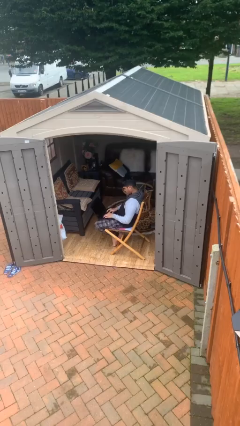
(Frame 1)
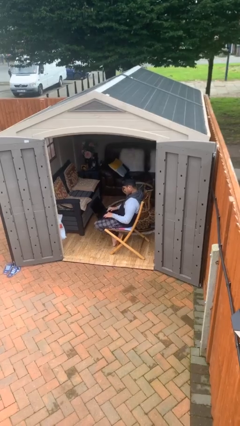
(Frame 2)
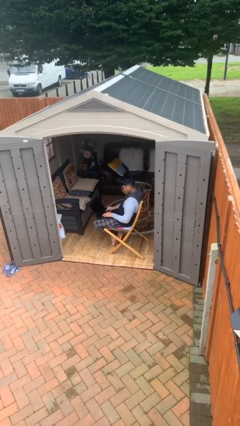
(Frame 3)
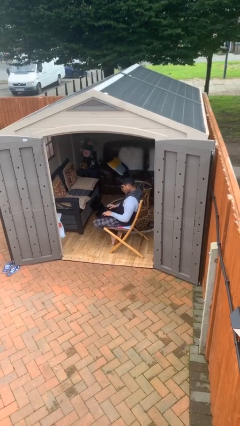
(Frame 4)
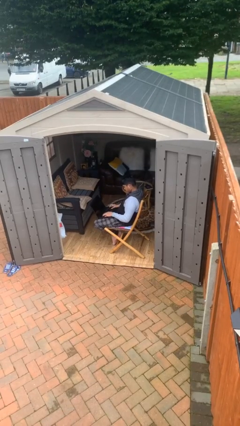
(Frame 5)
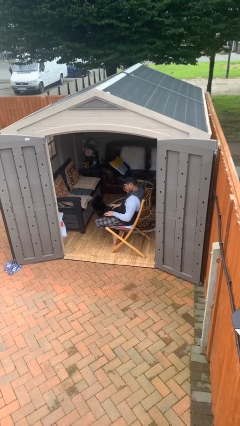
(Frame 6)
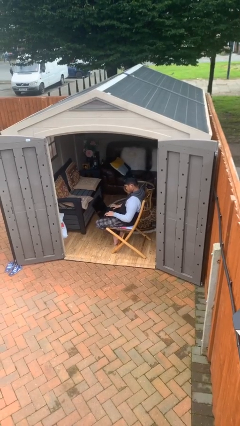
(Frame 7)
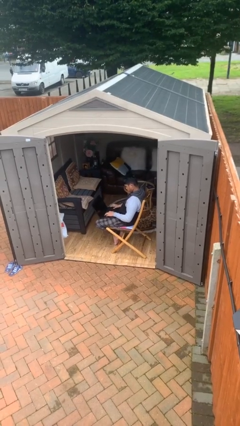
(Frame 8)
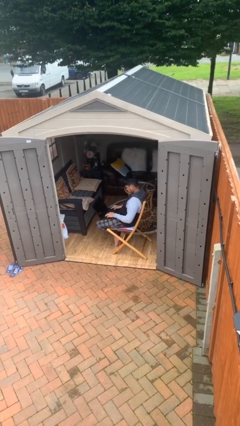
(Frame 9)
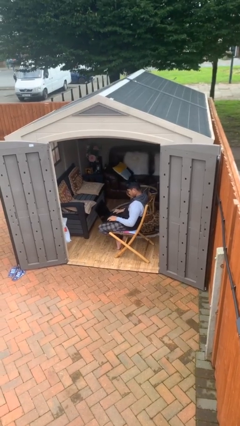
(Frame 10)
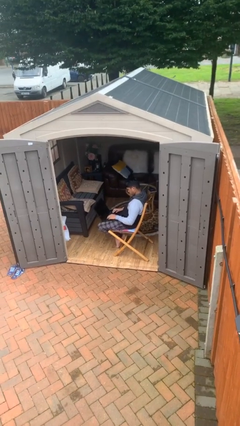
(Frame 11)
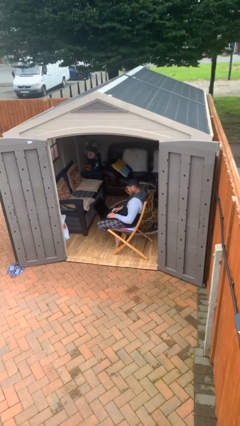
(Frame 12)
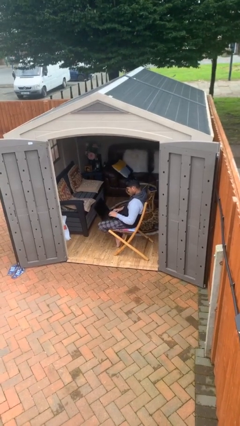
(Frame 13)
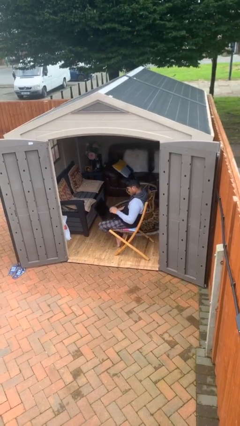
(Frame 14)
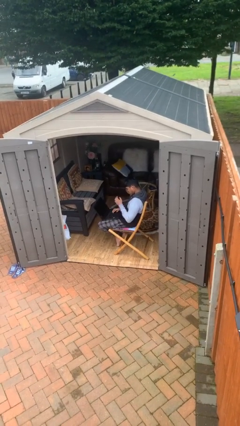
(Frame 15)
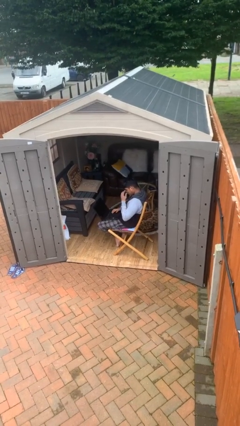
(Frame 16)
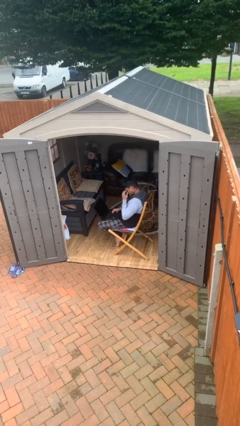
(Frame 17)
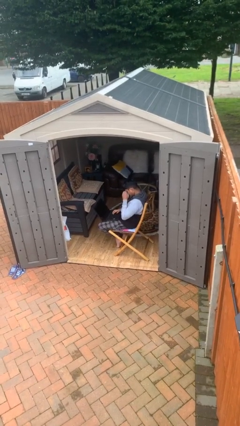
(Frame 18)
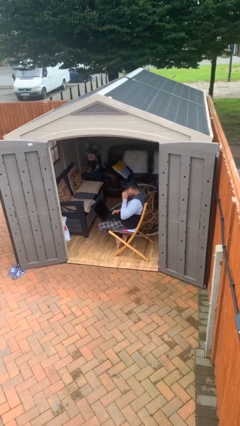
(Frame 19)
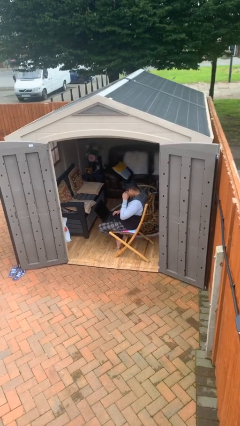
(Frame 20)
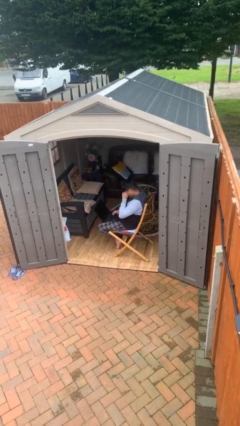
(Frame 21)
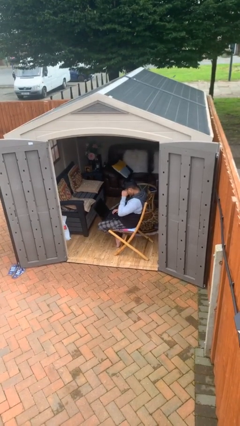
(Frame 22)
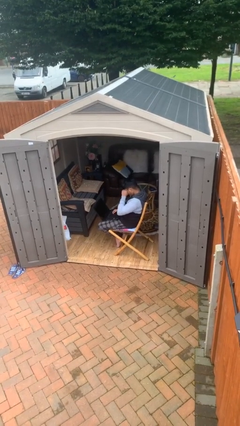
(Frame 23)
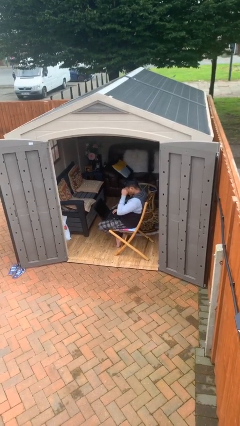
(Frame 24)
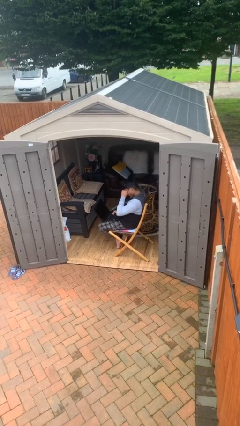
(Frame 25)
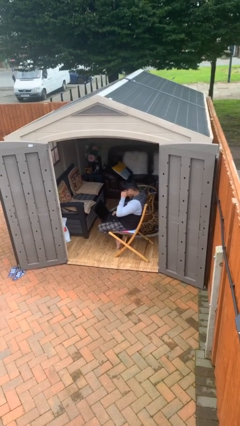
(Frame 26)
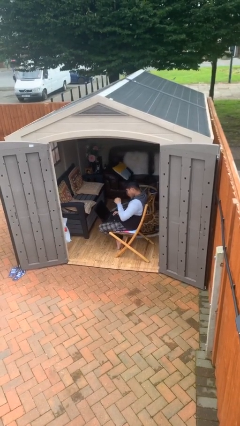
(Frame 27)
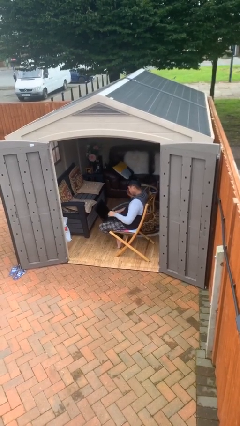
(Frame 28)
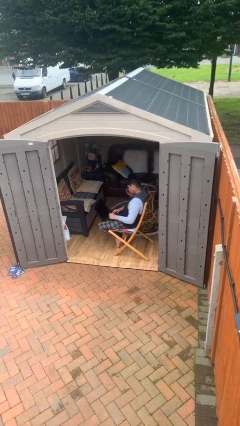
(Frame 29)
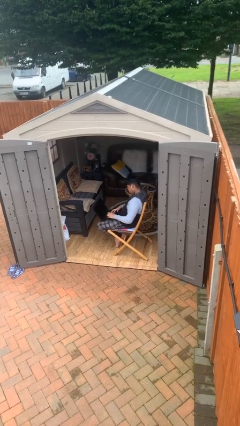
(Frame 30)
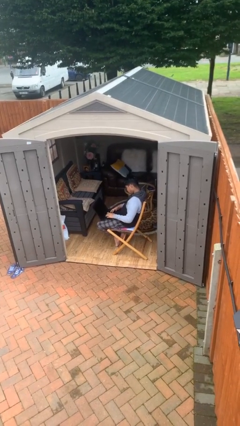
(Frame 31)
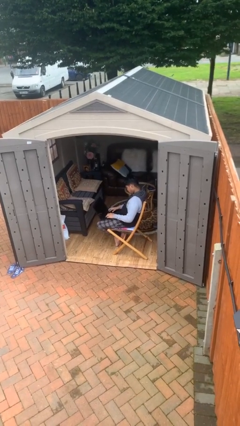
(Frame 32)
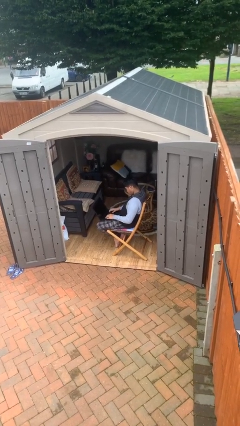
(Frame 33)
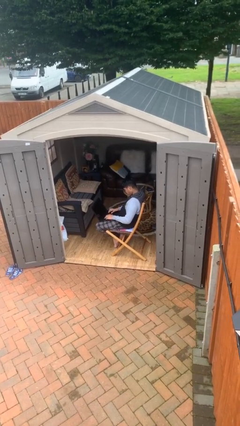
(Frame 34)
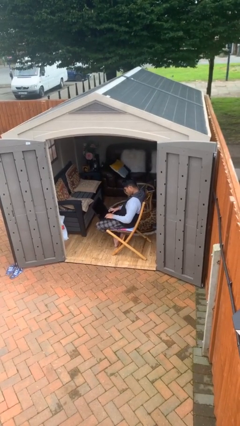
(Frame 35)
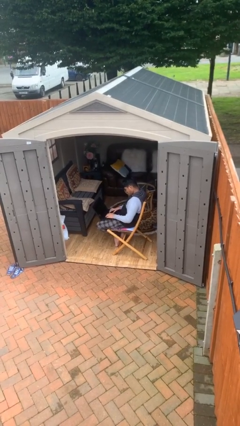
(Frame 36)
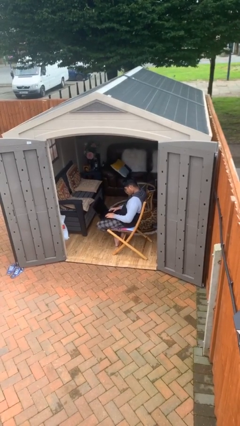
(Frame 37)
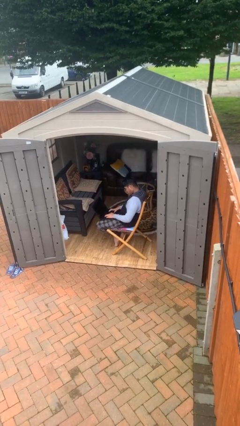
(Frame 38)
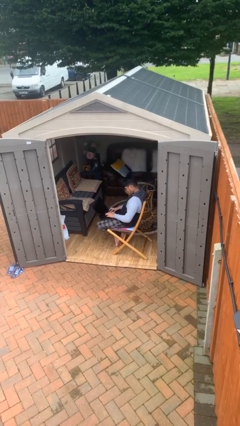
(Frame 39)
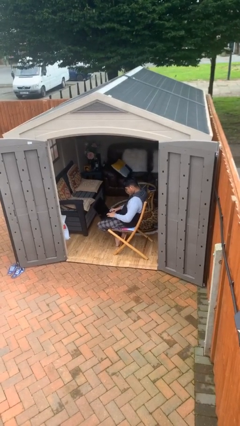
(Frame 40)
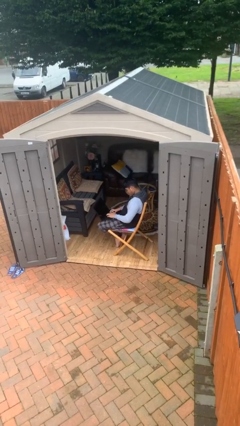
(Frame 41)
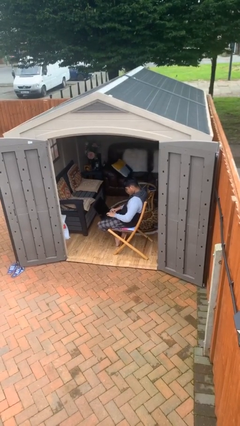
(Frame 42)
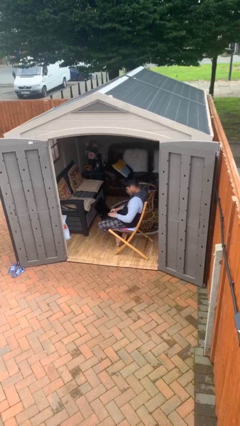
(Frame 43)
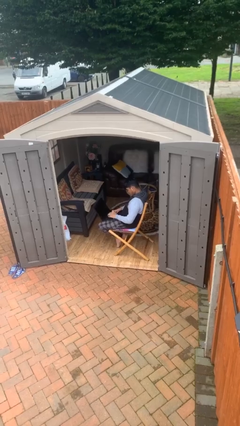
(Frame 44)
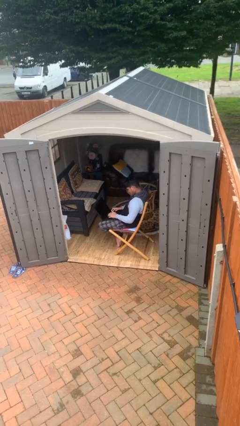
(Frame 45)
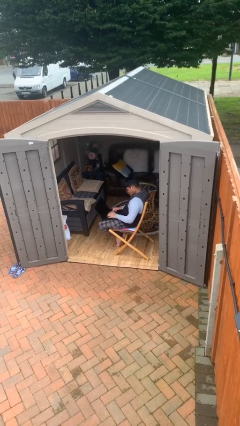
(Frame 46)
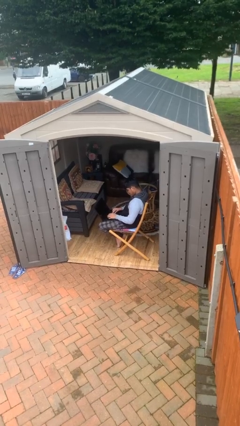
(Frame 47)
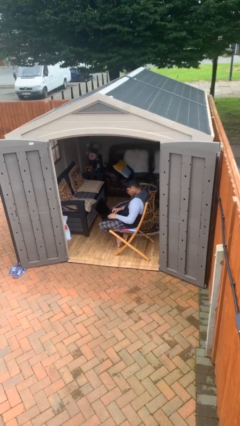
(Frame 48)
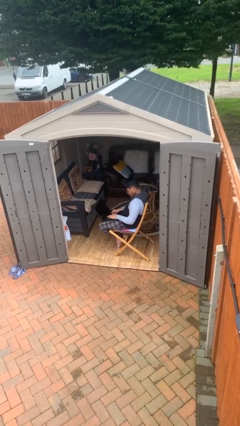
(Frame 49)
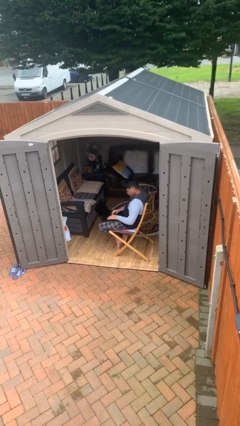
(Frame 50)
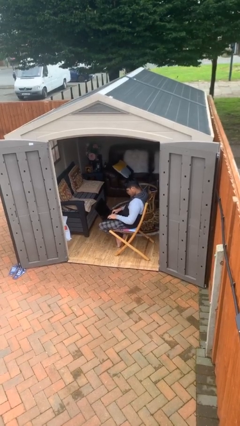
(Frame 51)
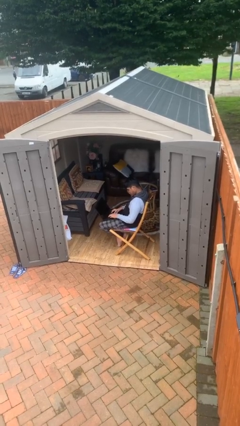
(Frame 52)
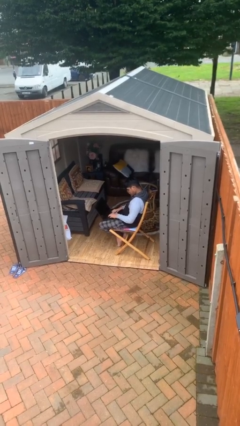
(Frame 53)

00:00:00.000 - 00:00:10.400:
person interacts with laptop

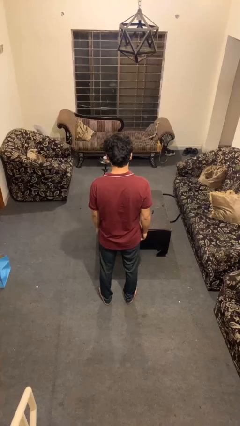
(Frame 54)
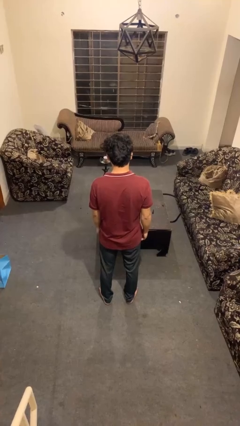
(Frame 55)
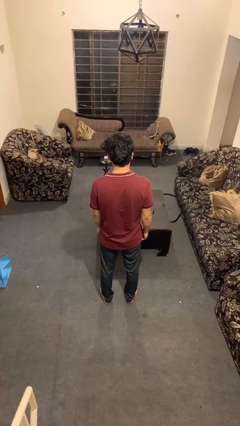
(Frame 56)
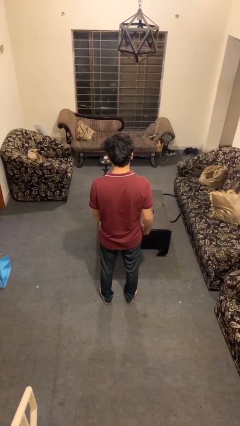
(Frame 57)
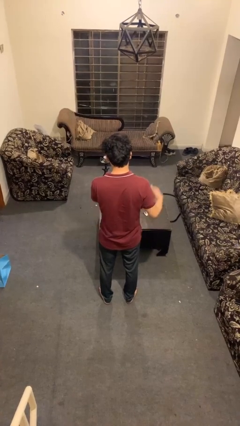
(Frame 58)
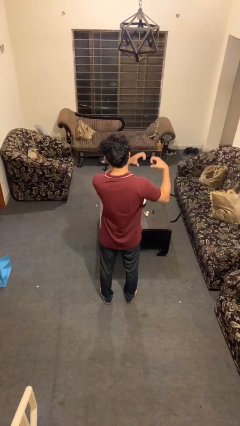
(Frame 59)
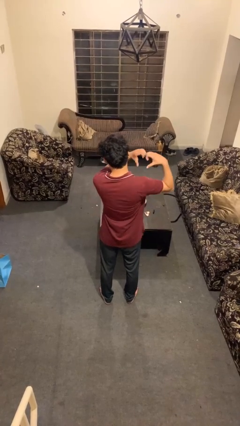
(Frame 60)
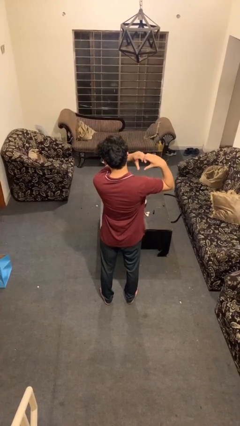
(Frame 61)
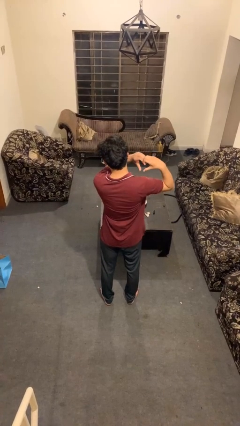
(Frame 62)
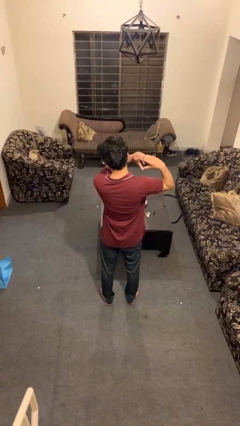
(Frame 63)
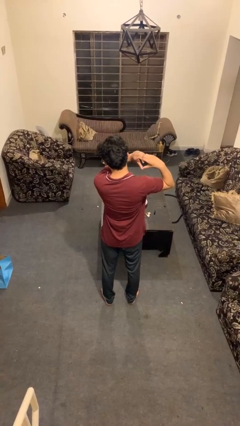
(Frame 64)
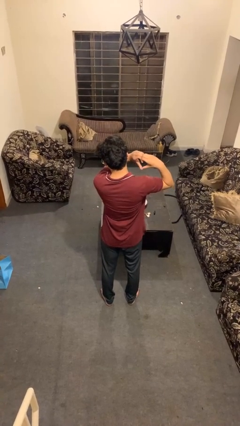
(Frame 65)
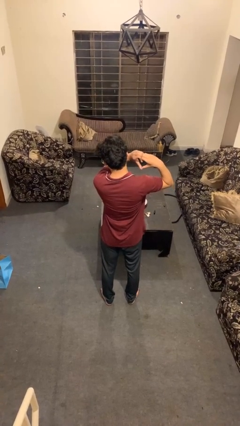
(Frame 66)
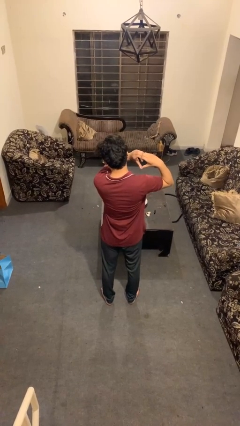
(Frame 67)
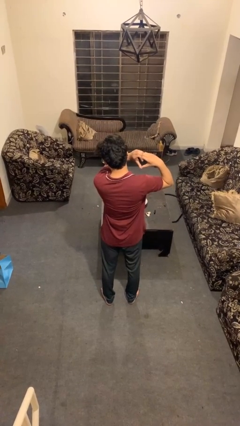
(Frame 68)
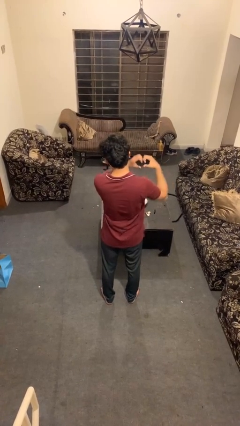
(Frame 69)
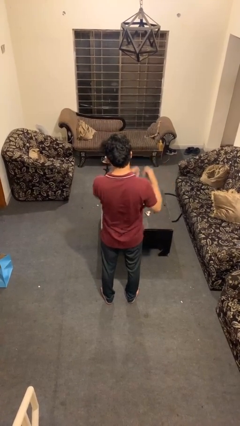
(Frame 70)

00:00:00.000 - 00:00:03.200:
person gestures heart

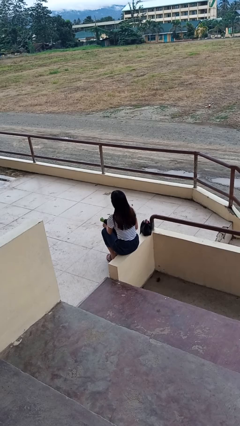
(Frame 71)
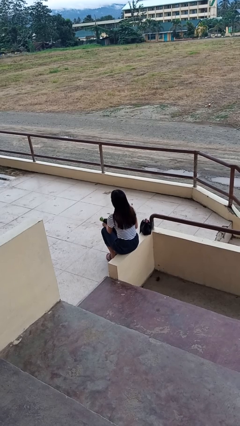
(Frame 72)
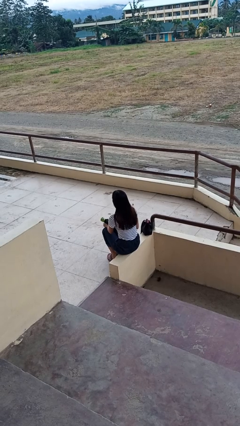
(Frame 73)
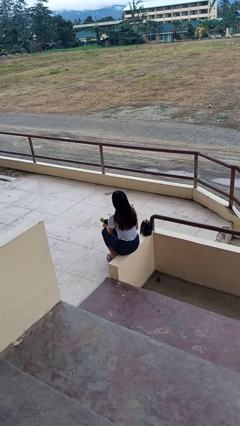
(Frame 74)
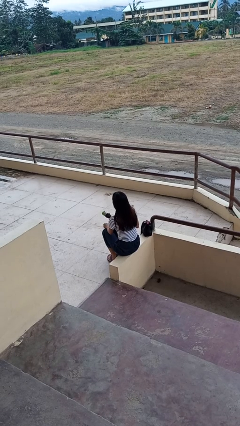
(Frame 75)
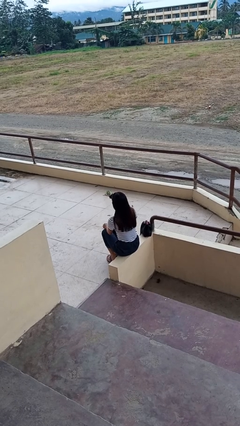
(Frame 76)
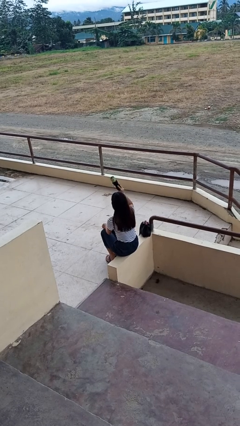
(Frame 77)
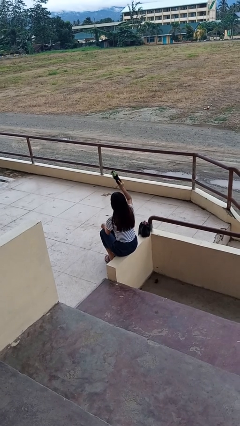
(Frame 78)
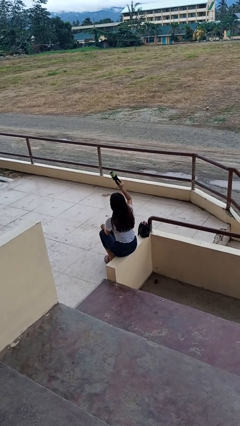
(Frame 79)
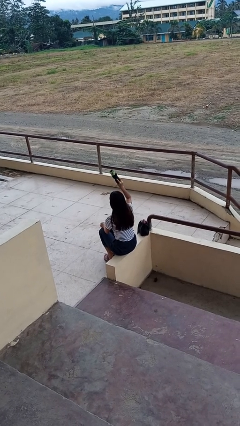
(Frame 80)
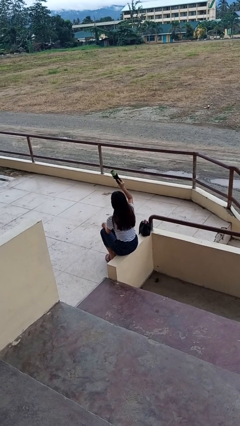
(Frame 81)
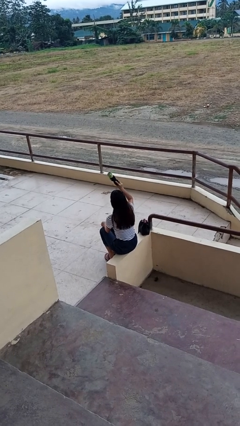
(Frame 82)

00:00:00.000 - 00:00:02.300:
person holds object above head

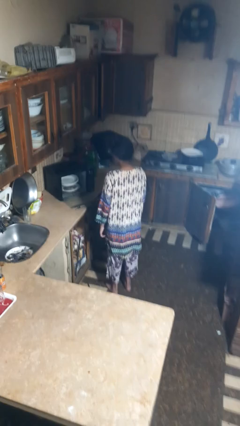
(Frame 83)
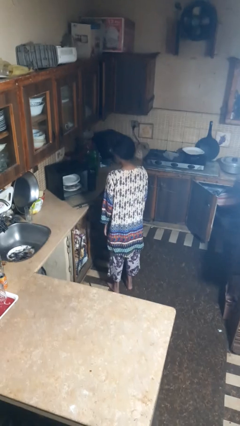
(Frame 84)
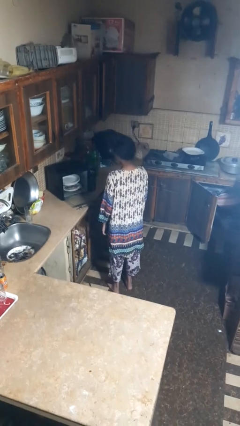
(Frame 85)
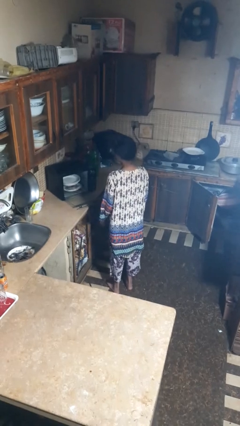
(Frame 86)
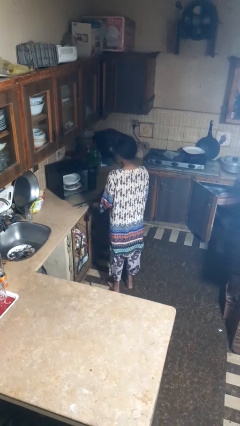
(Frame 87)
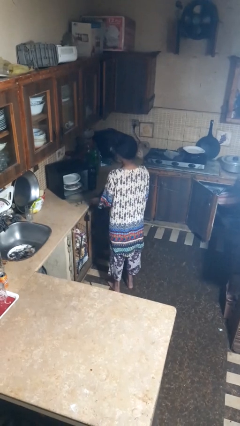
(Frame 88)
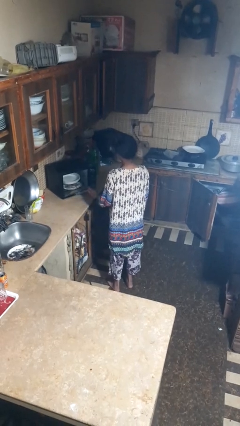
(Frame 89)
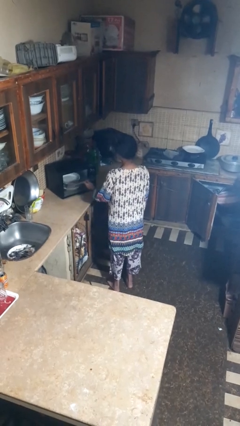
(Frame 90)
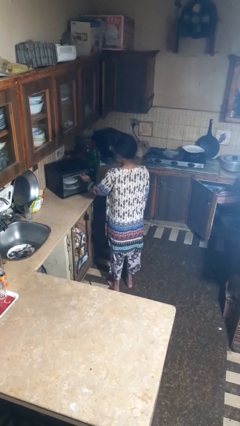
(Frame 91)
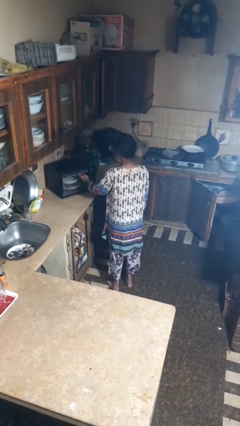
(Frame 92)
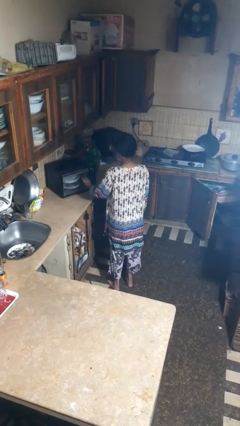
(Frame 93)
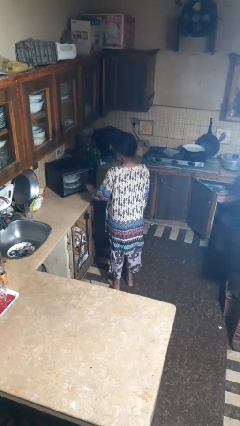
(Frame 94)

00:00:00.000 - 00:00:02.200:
person closes dishwasher
